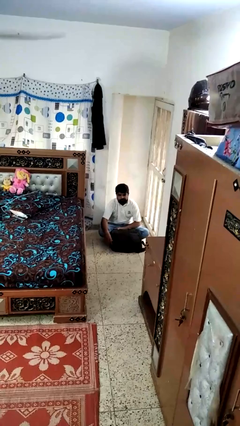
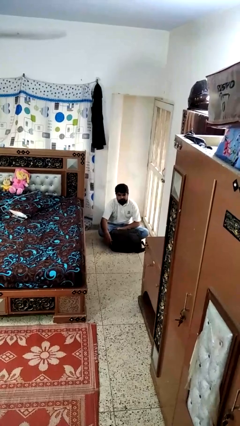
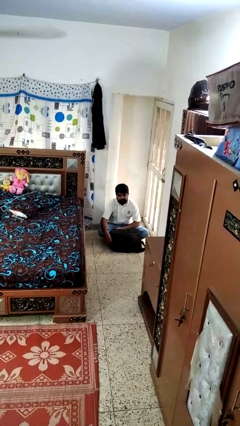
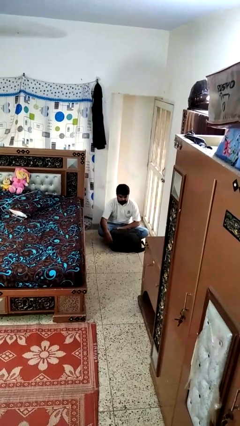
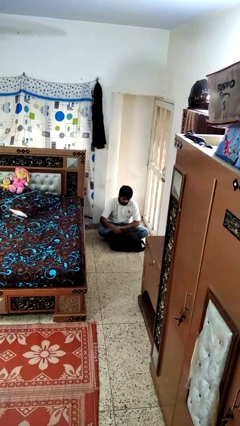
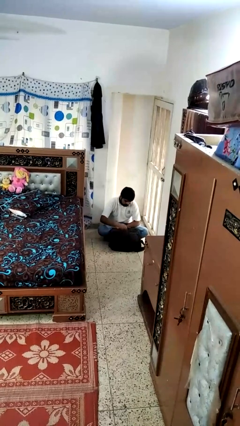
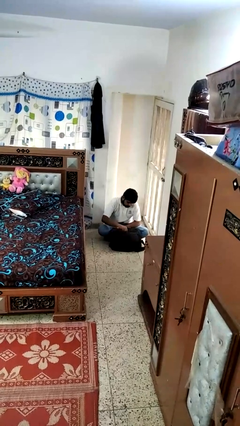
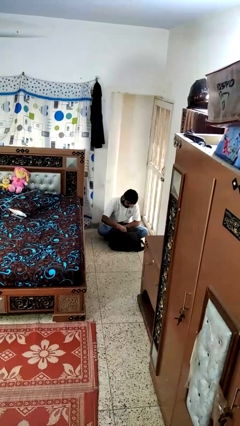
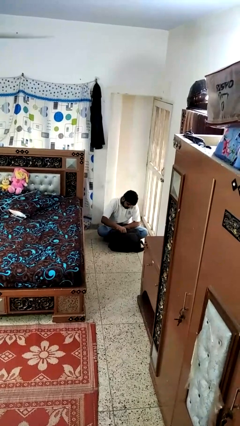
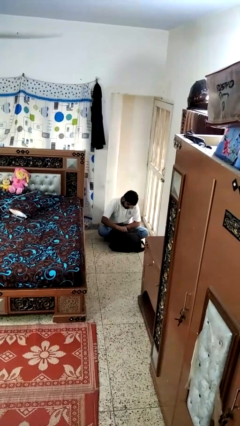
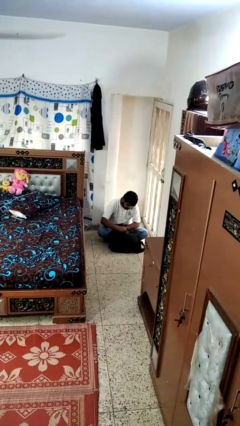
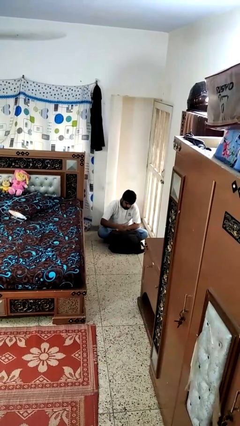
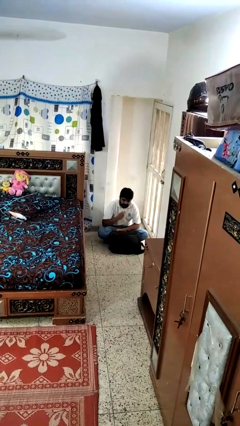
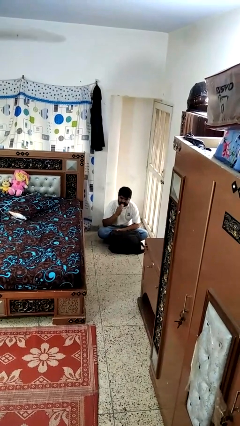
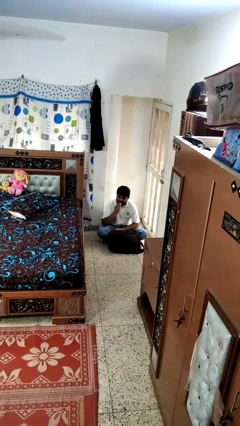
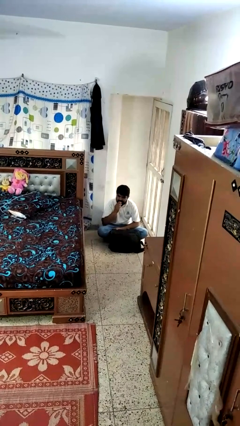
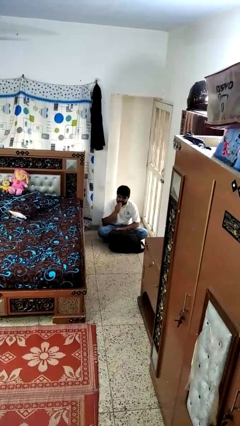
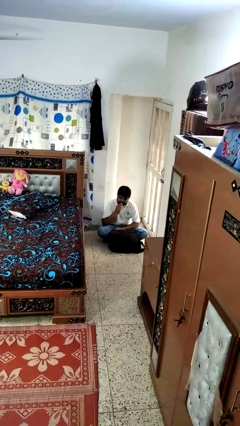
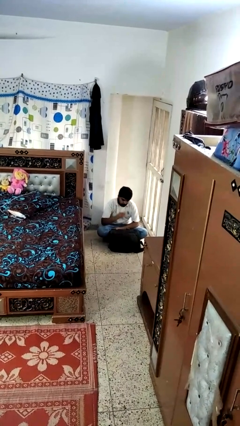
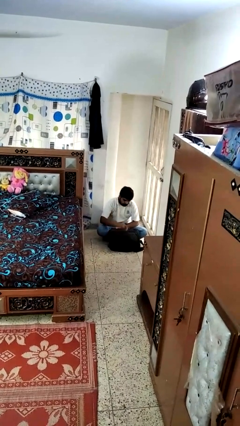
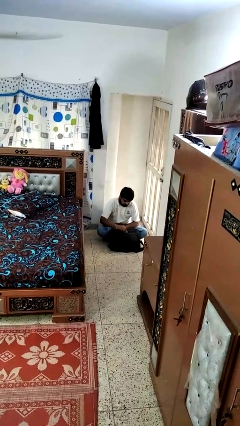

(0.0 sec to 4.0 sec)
person eats snack from bag

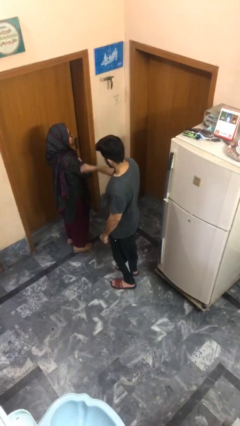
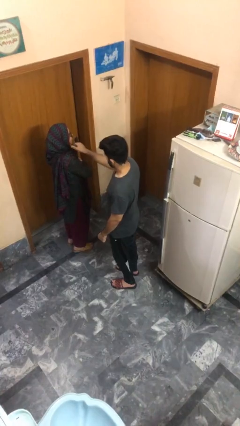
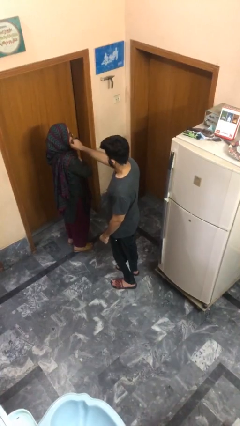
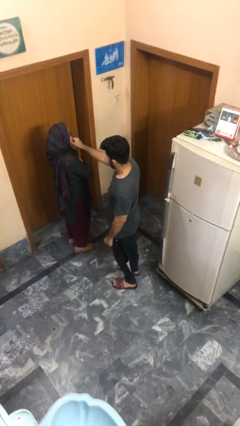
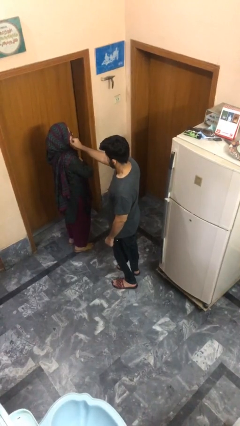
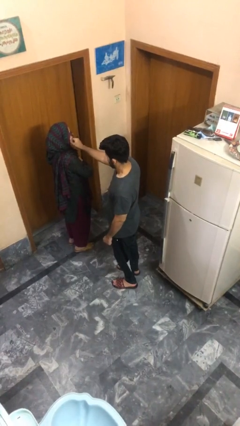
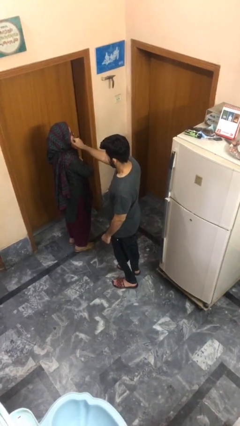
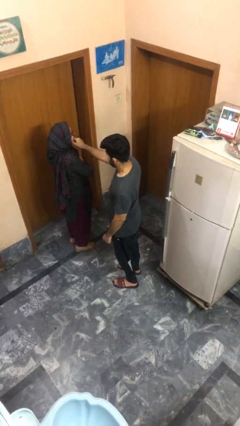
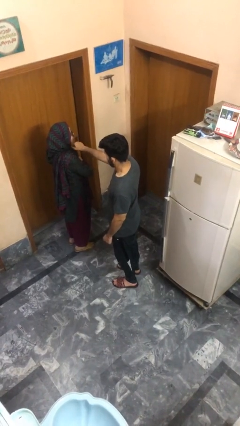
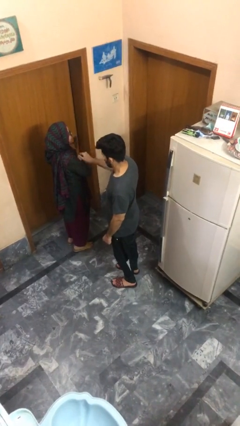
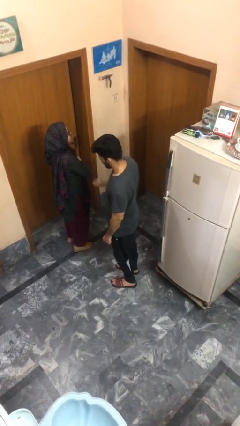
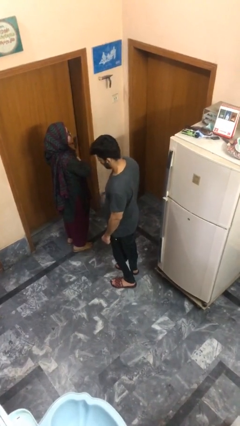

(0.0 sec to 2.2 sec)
person touches face of person

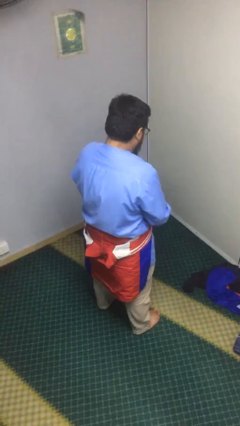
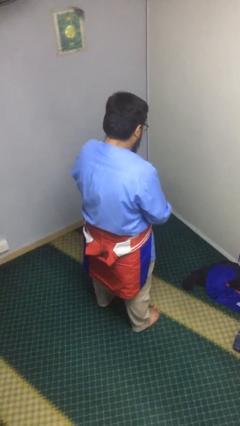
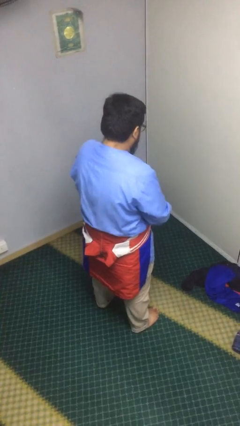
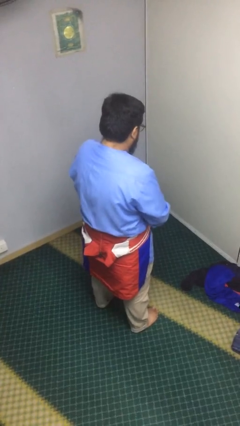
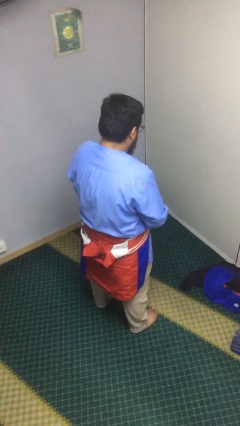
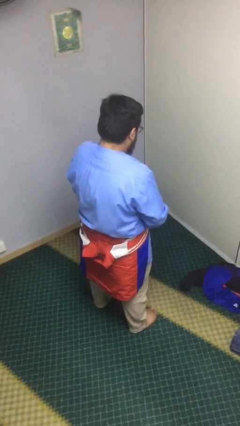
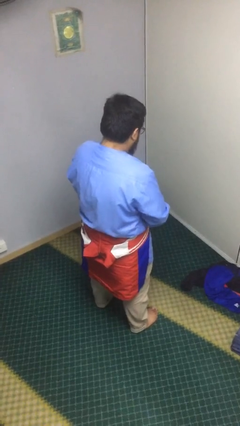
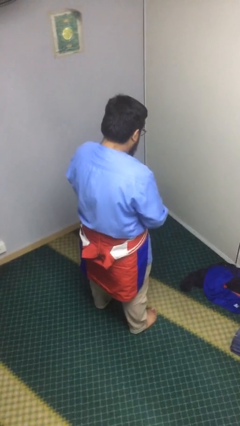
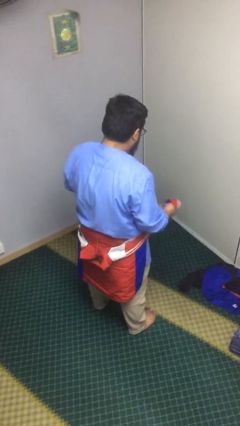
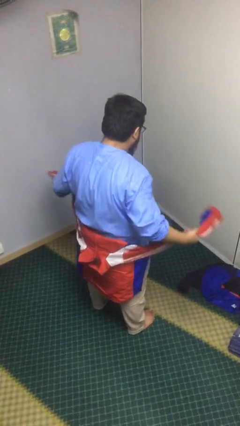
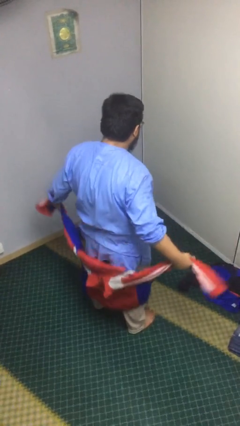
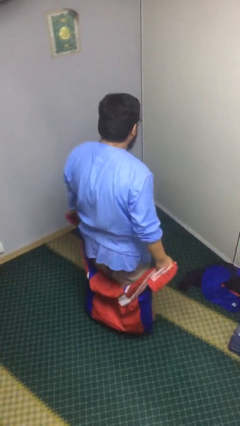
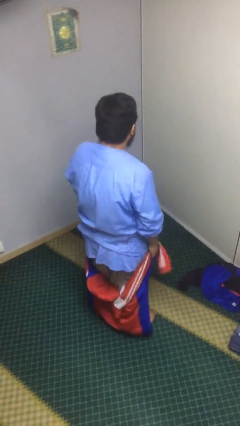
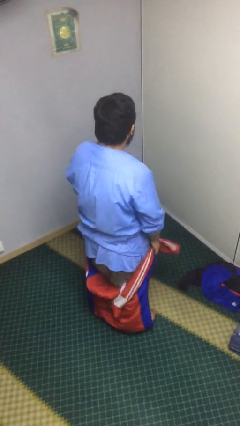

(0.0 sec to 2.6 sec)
person unties jacket around waist

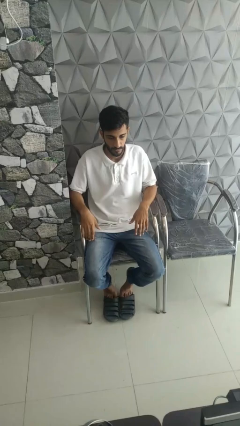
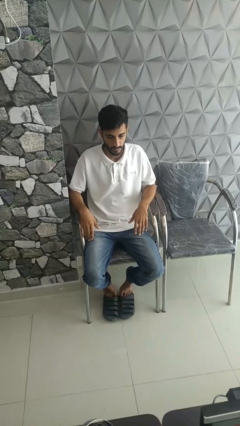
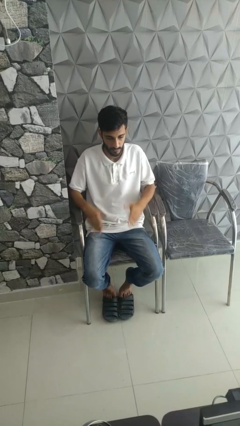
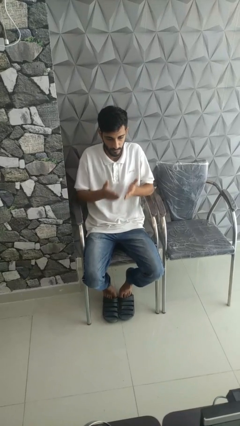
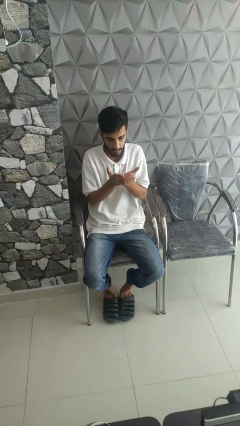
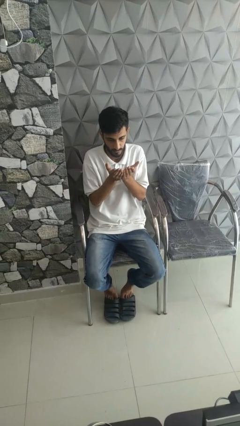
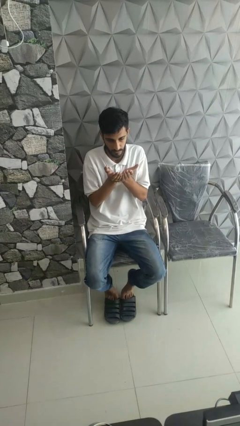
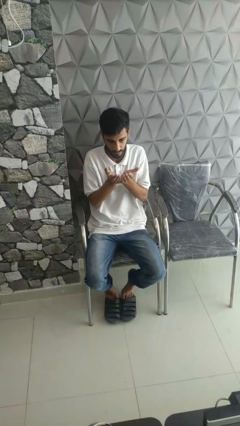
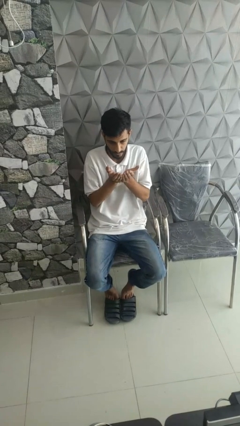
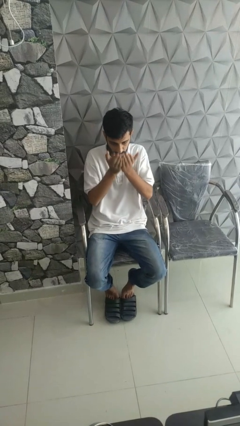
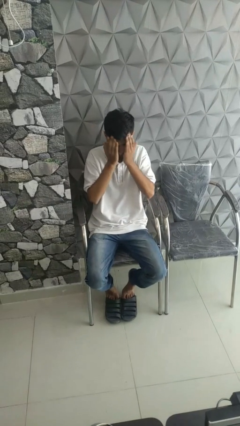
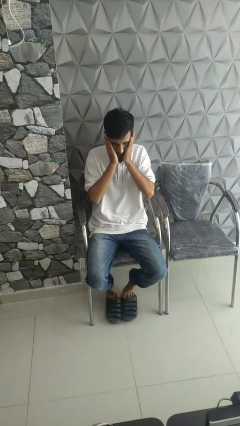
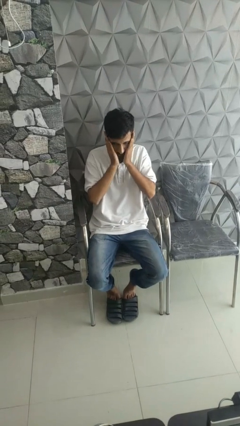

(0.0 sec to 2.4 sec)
person prays

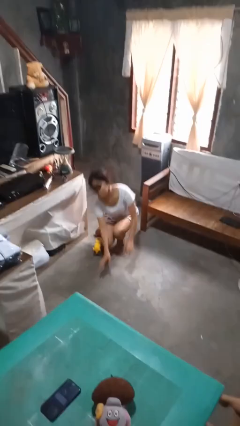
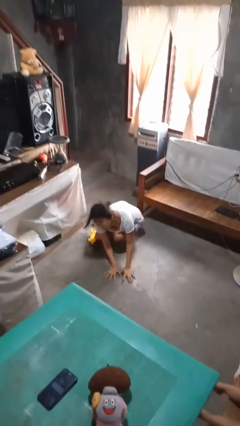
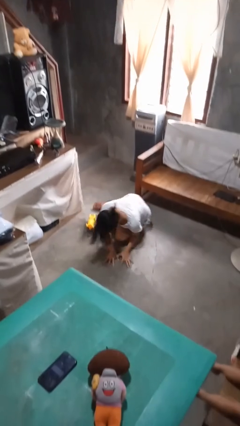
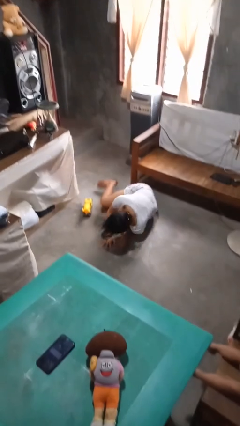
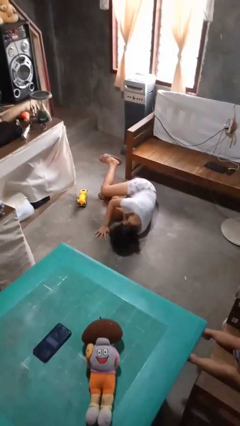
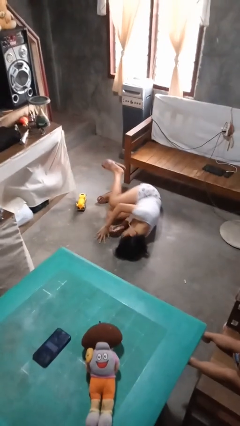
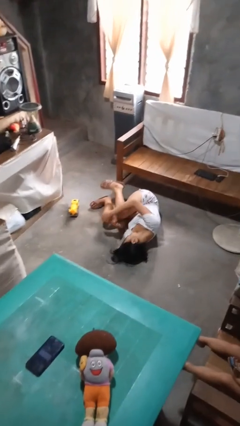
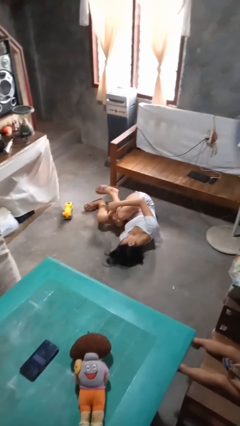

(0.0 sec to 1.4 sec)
person lies down on floor

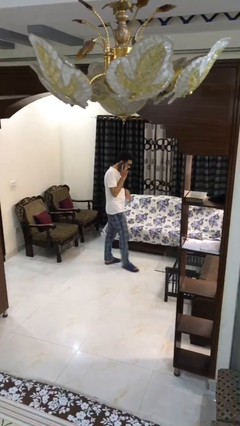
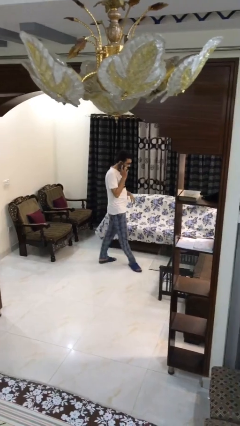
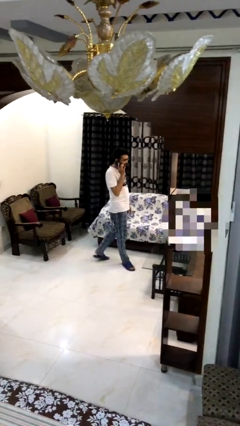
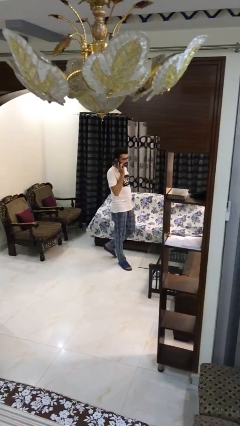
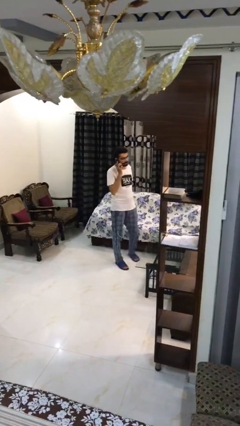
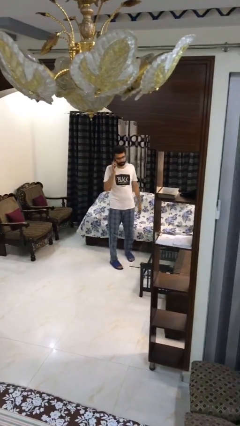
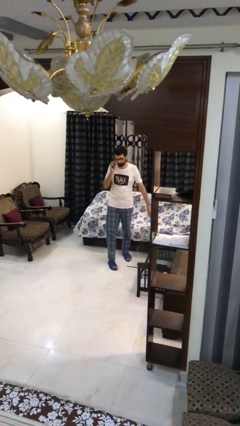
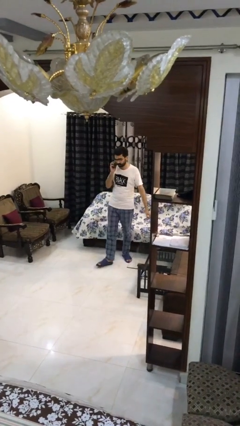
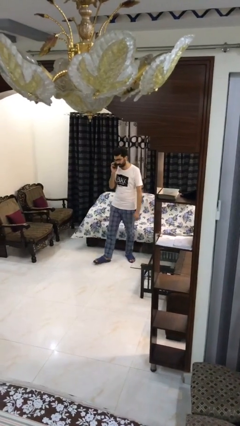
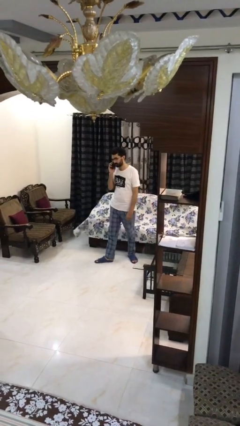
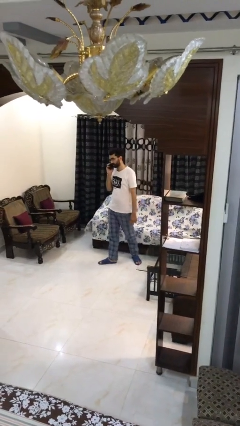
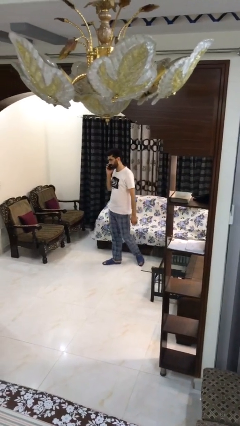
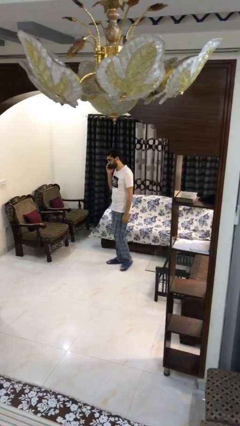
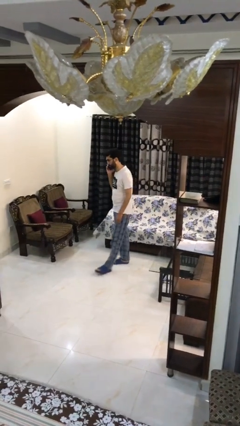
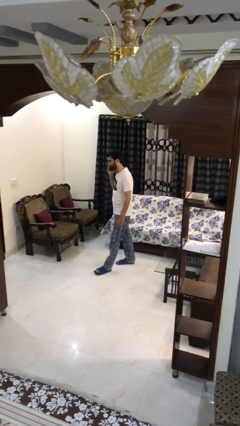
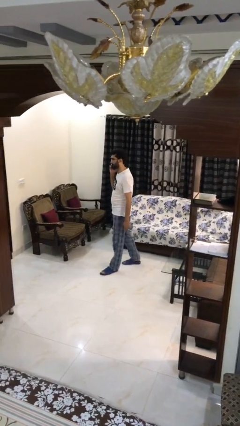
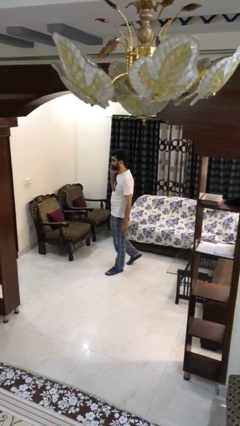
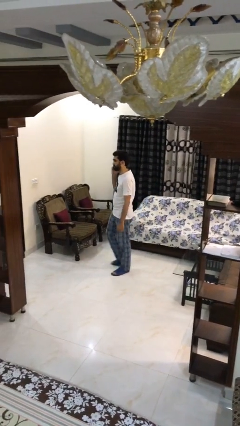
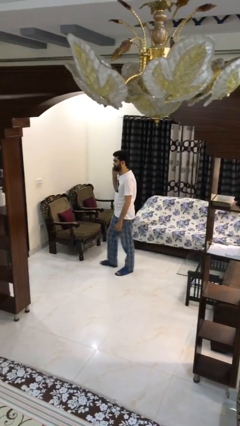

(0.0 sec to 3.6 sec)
person talks on phone

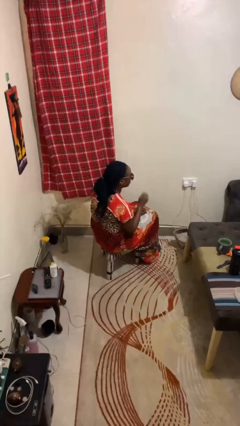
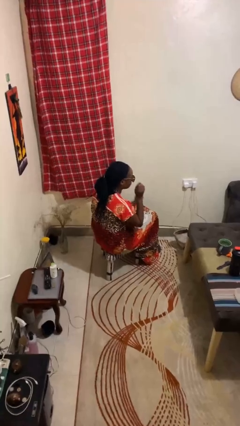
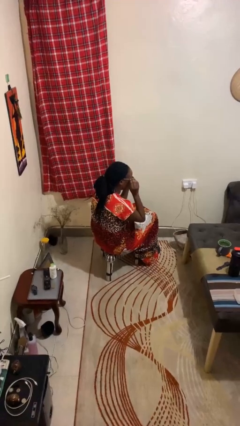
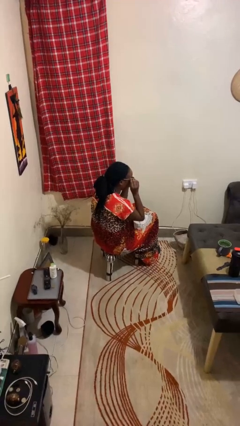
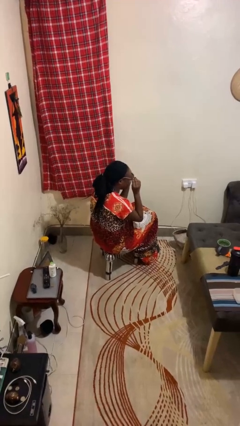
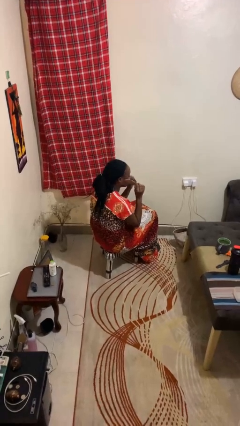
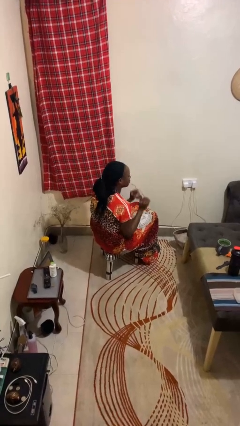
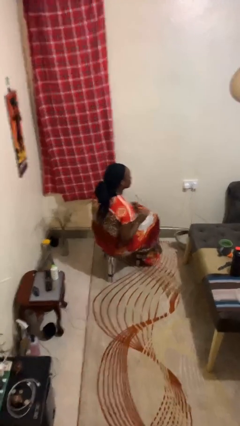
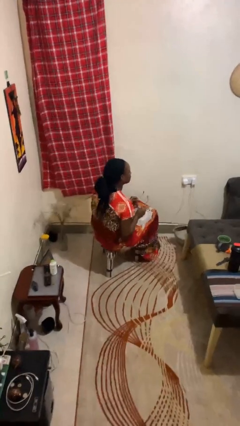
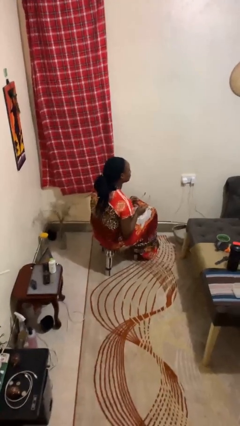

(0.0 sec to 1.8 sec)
person takes off sunglasses
